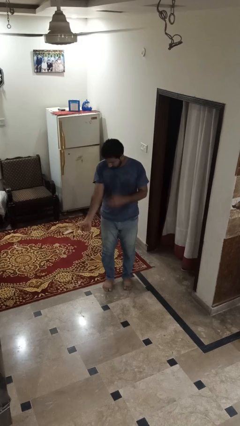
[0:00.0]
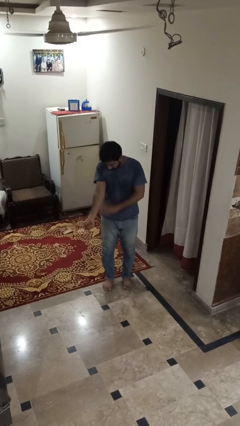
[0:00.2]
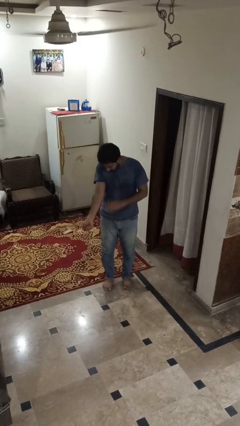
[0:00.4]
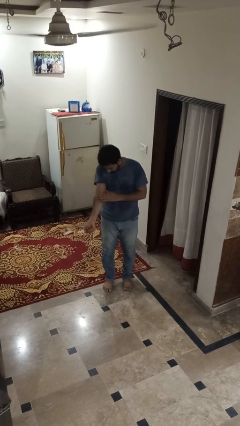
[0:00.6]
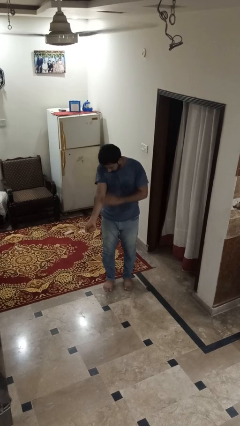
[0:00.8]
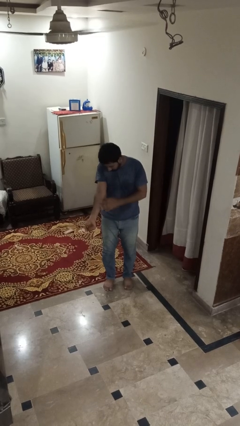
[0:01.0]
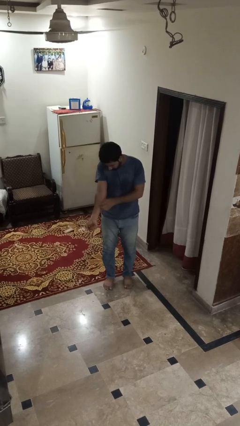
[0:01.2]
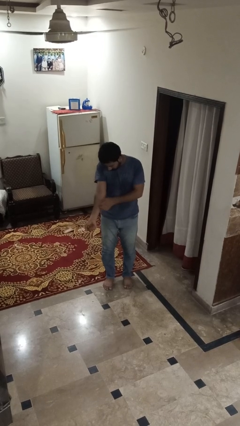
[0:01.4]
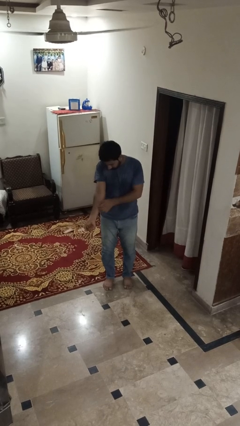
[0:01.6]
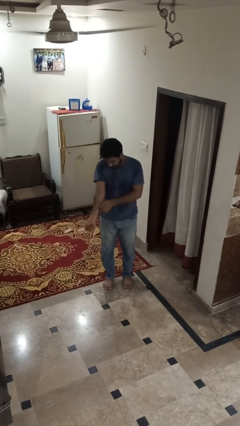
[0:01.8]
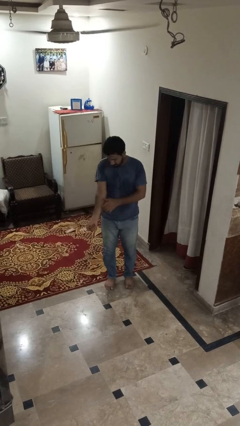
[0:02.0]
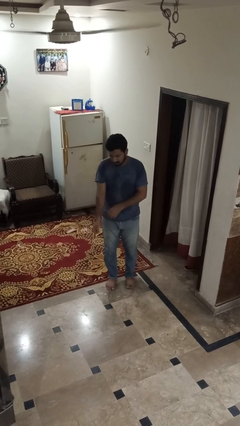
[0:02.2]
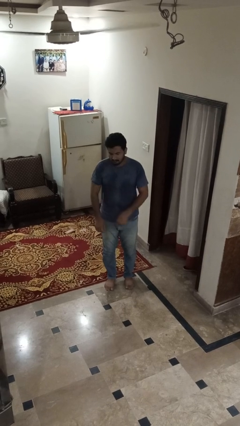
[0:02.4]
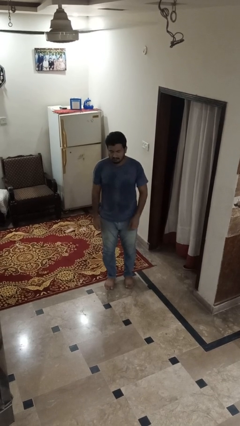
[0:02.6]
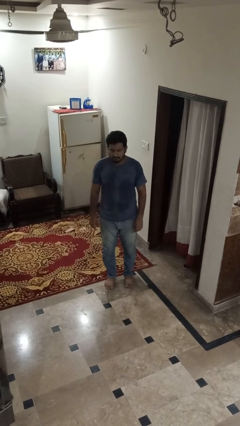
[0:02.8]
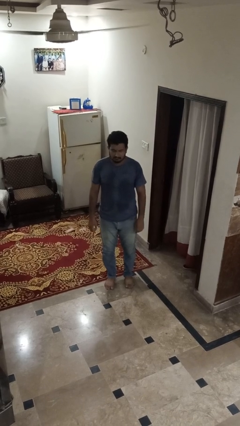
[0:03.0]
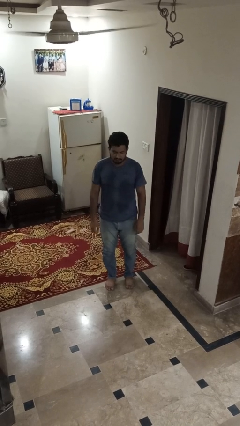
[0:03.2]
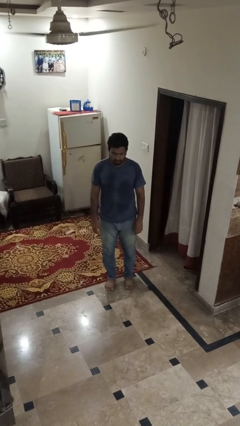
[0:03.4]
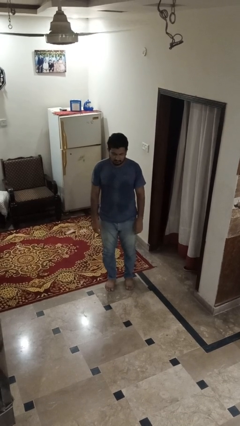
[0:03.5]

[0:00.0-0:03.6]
person swats bug

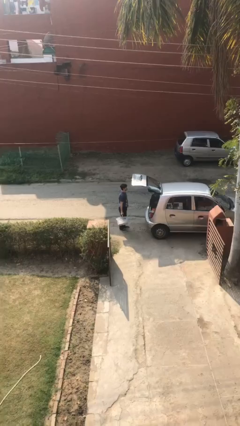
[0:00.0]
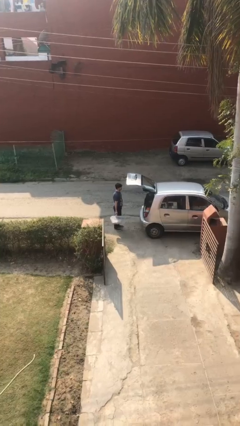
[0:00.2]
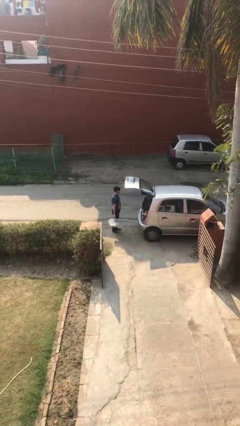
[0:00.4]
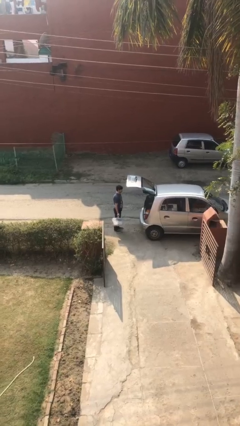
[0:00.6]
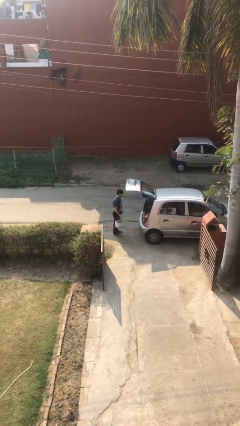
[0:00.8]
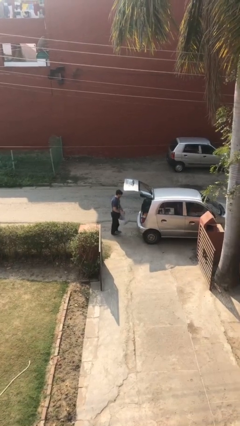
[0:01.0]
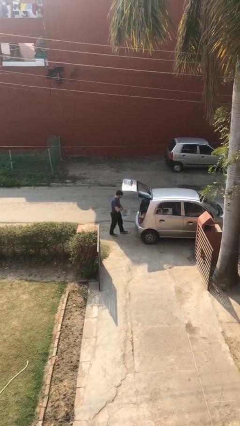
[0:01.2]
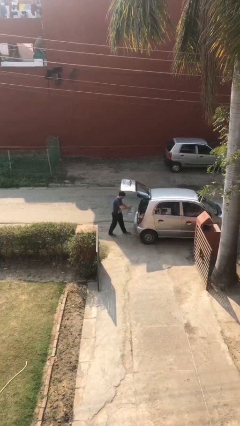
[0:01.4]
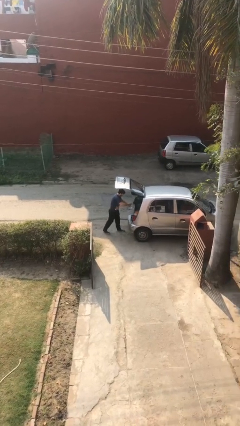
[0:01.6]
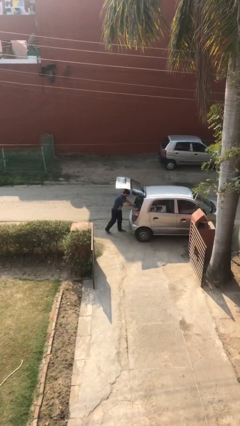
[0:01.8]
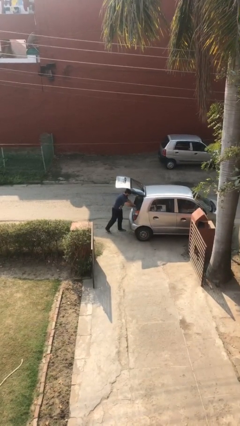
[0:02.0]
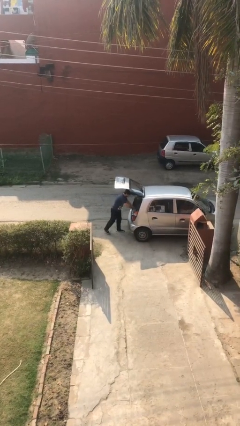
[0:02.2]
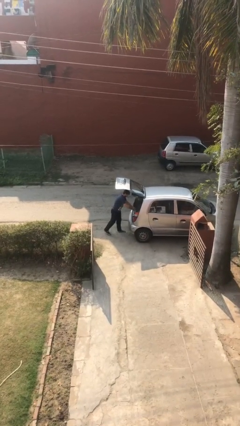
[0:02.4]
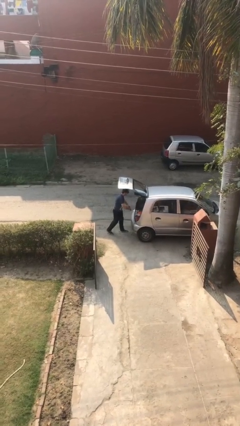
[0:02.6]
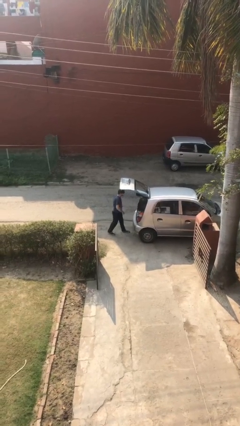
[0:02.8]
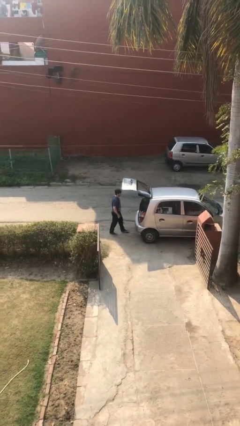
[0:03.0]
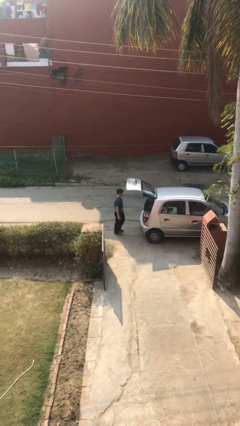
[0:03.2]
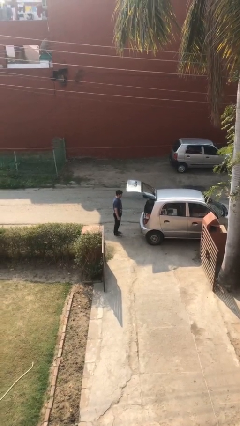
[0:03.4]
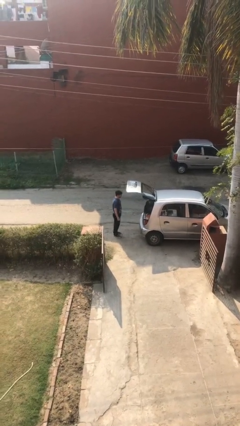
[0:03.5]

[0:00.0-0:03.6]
person loads car

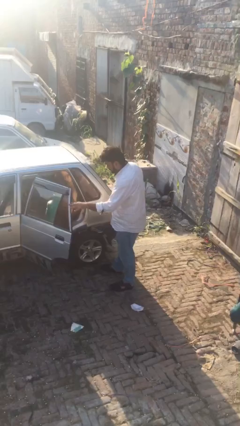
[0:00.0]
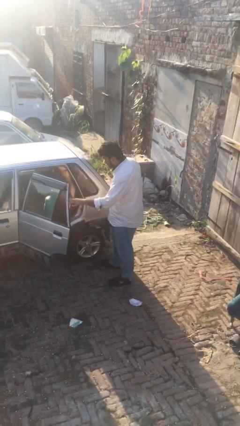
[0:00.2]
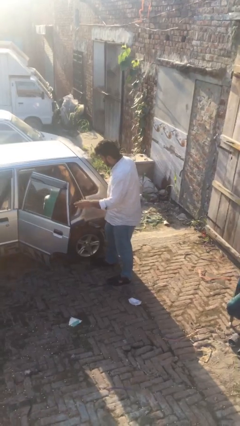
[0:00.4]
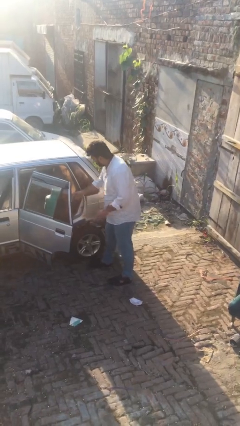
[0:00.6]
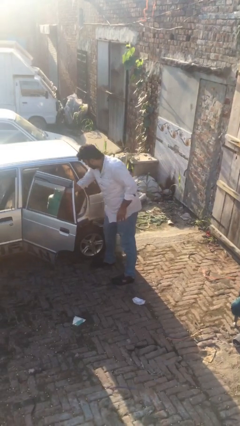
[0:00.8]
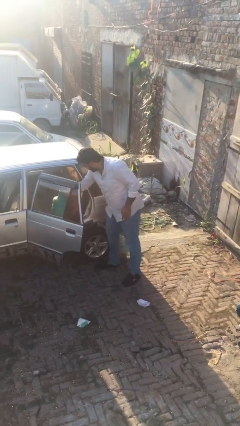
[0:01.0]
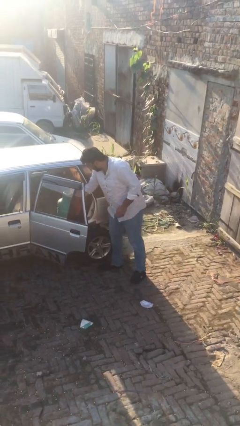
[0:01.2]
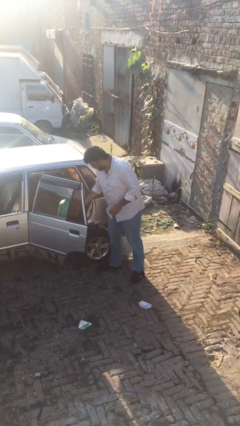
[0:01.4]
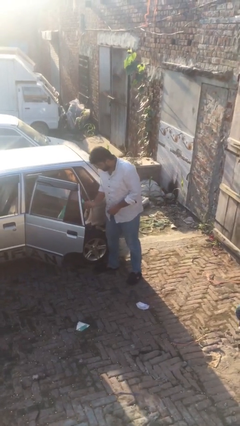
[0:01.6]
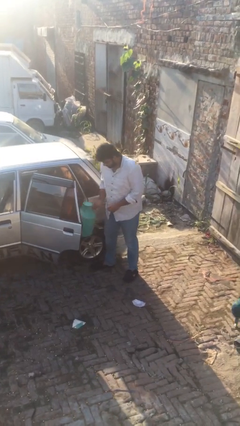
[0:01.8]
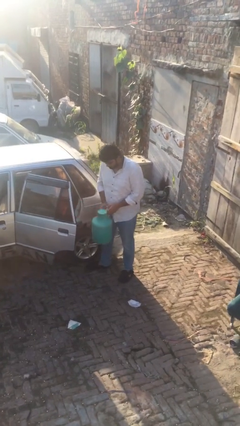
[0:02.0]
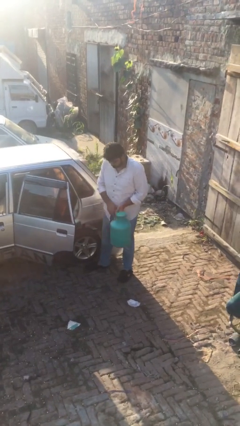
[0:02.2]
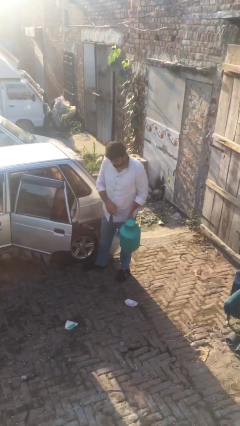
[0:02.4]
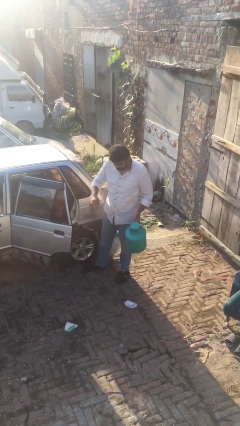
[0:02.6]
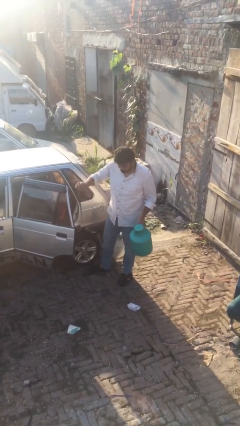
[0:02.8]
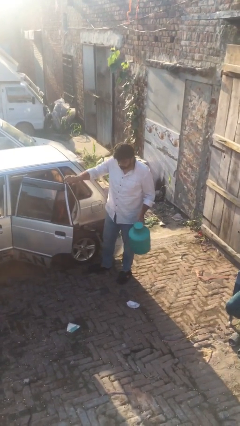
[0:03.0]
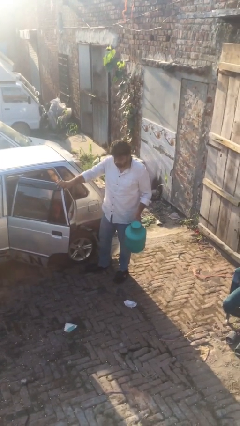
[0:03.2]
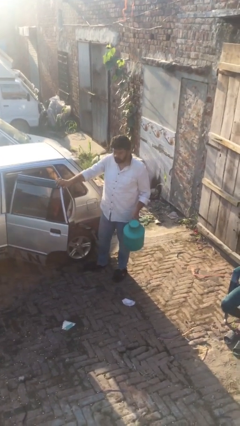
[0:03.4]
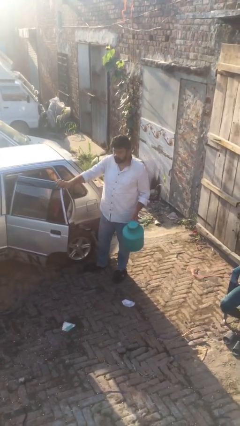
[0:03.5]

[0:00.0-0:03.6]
person unloads car

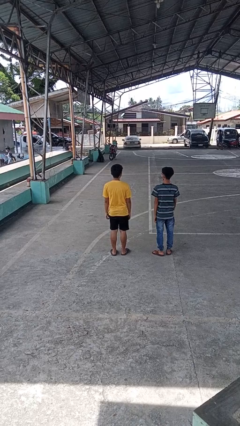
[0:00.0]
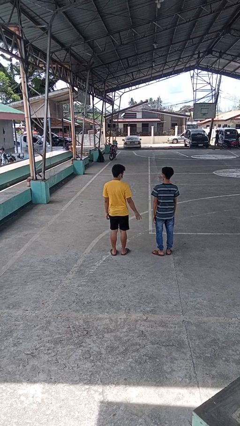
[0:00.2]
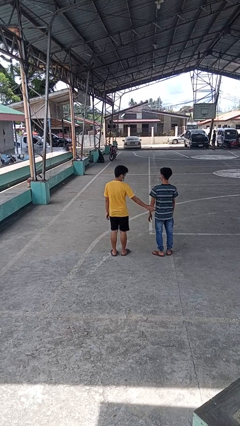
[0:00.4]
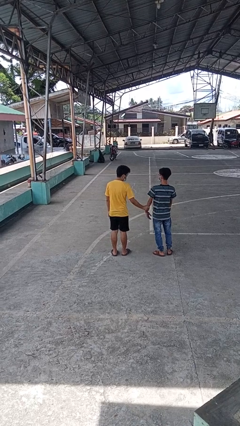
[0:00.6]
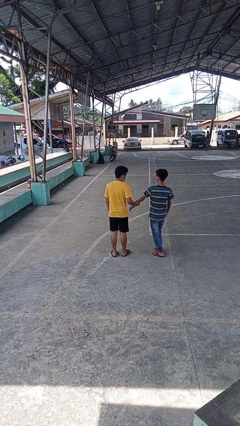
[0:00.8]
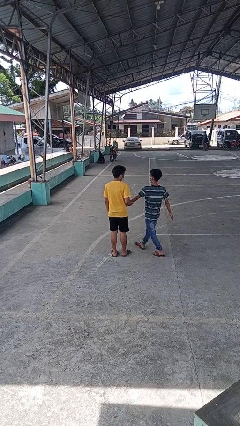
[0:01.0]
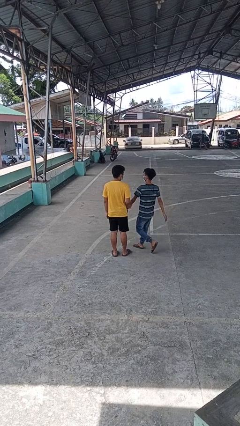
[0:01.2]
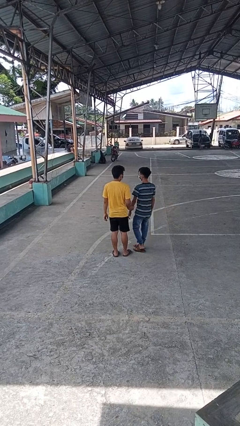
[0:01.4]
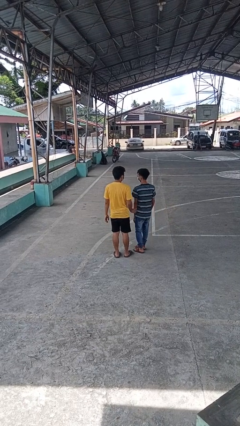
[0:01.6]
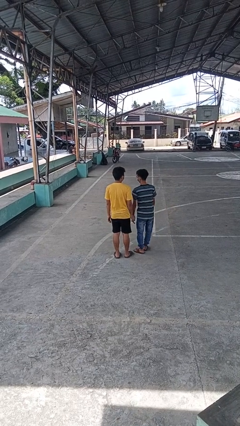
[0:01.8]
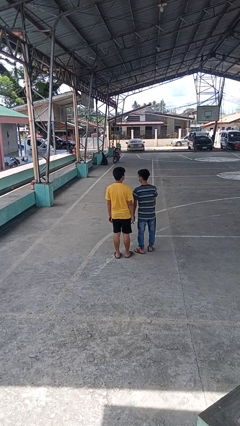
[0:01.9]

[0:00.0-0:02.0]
person grabs person by forearm

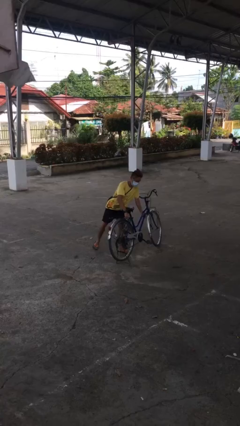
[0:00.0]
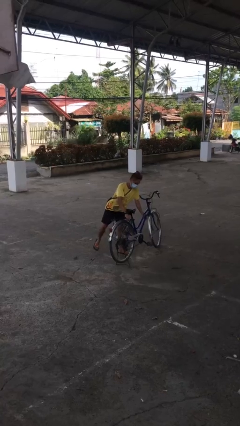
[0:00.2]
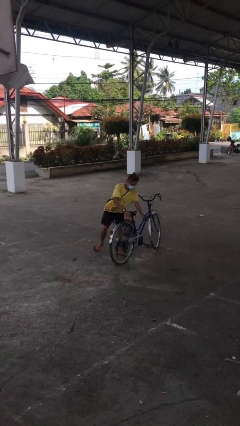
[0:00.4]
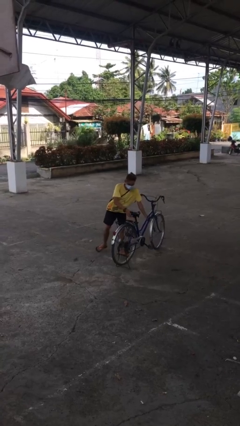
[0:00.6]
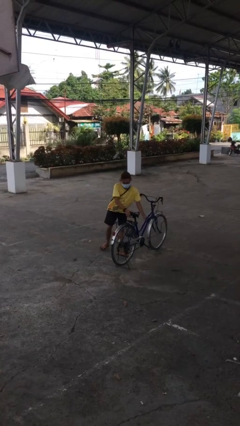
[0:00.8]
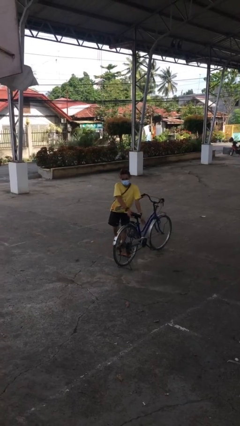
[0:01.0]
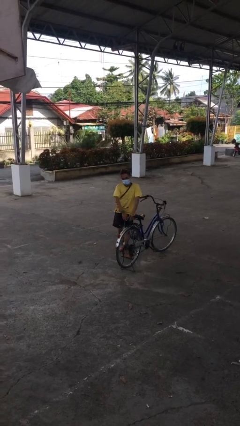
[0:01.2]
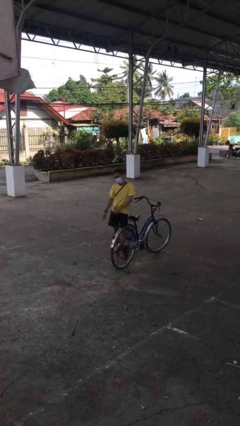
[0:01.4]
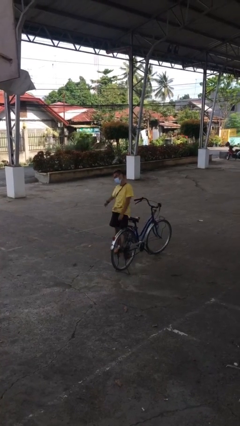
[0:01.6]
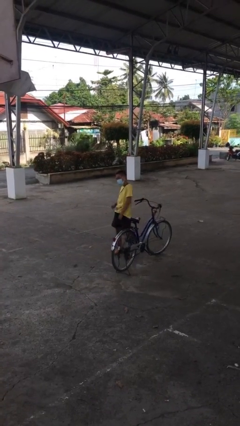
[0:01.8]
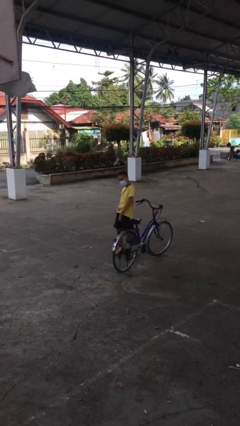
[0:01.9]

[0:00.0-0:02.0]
person puts down object on floor

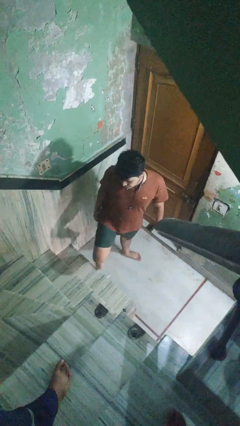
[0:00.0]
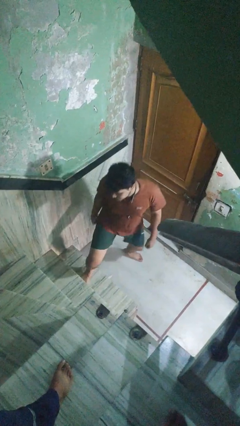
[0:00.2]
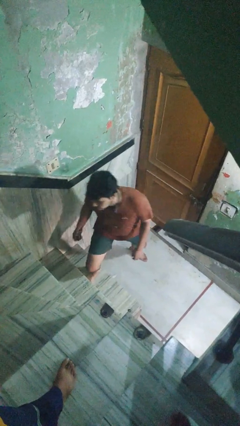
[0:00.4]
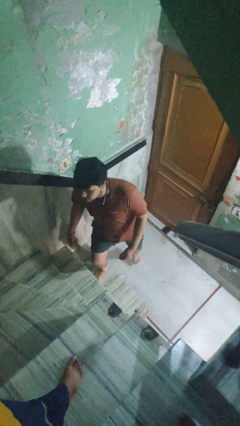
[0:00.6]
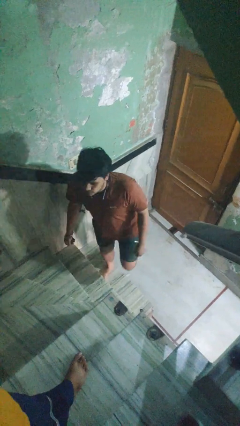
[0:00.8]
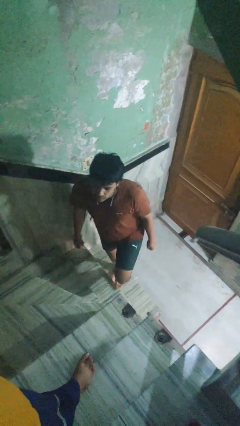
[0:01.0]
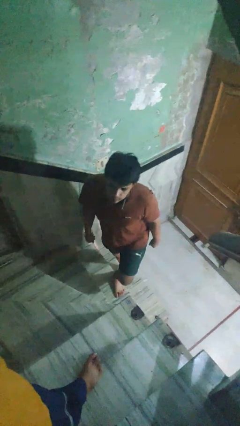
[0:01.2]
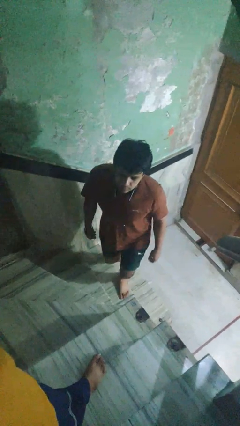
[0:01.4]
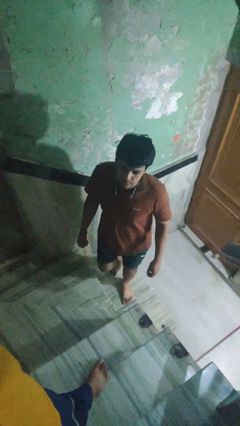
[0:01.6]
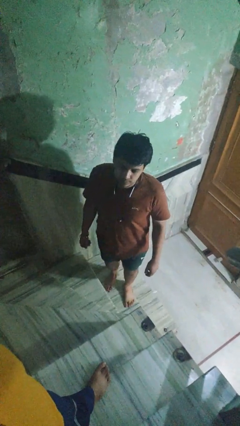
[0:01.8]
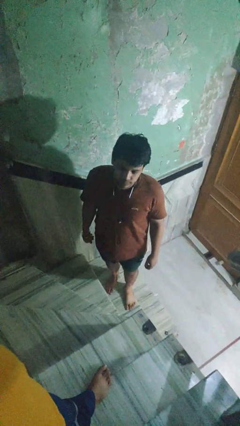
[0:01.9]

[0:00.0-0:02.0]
person climbs up stairs

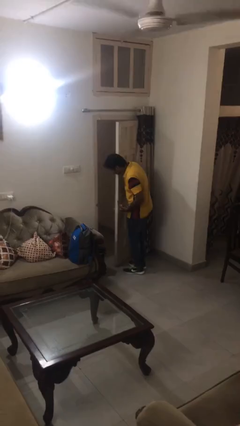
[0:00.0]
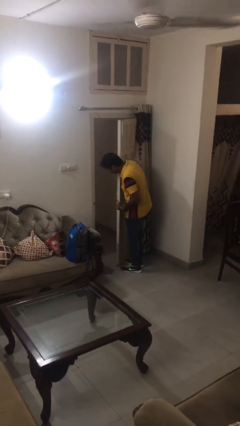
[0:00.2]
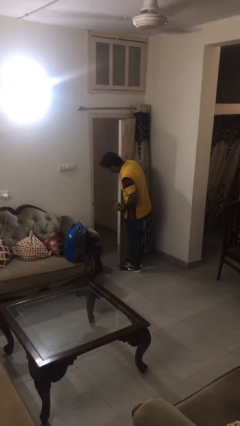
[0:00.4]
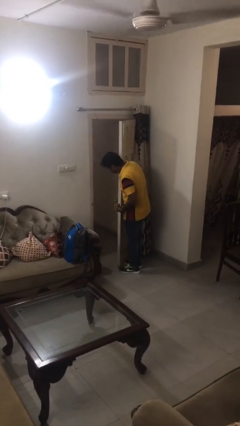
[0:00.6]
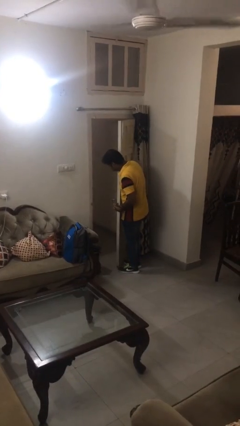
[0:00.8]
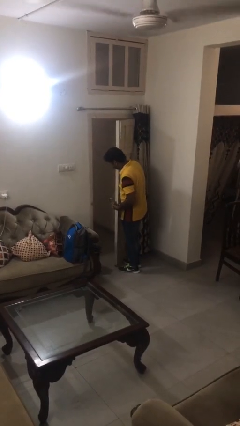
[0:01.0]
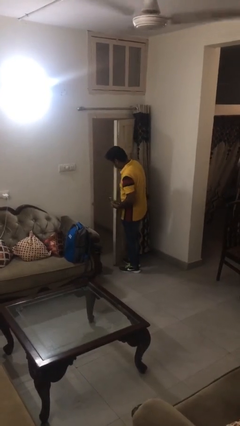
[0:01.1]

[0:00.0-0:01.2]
person opens facility door
